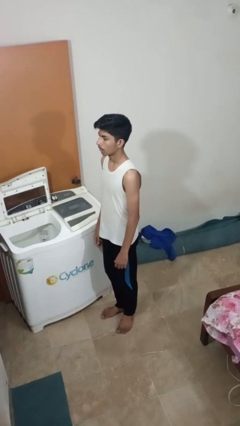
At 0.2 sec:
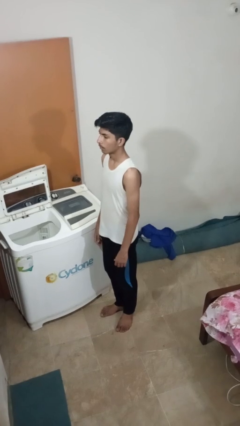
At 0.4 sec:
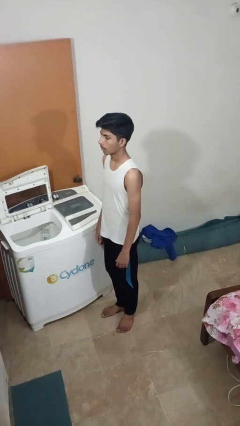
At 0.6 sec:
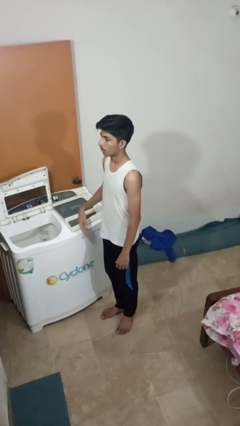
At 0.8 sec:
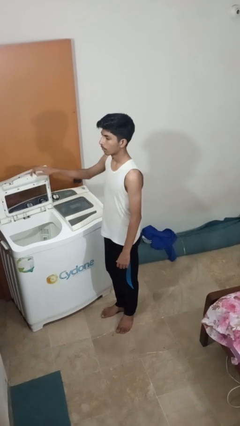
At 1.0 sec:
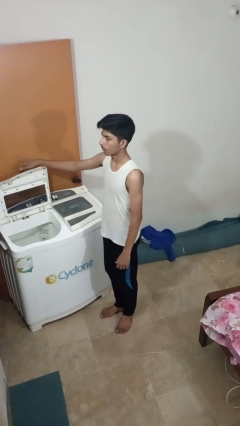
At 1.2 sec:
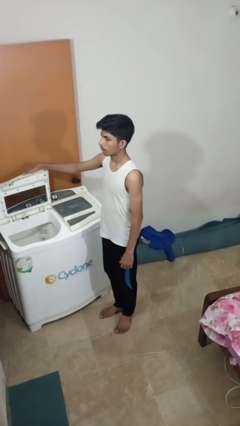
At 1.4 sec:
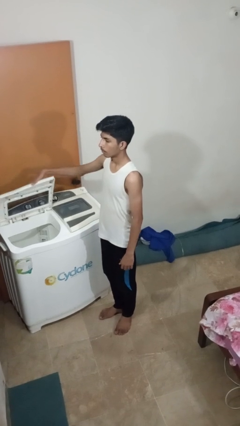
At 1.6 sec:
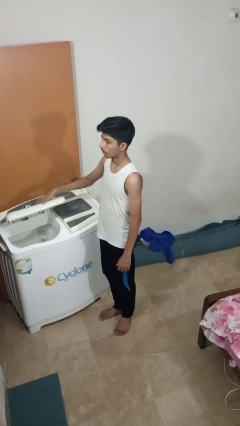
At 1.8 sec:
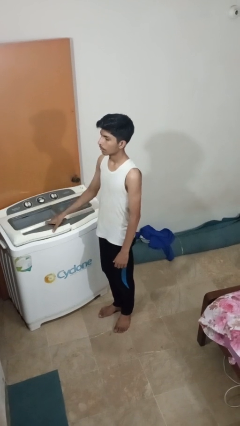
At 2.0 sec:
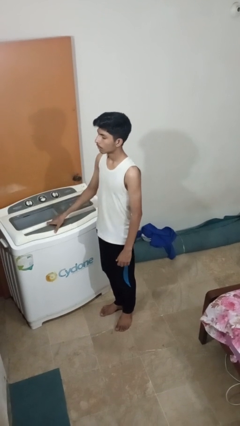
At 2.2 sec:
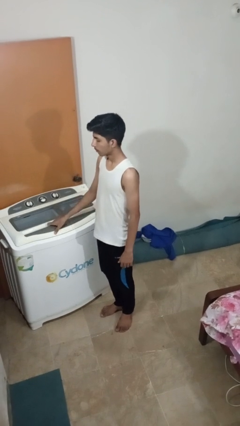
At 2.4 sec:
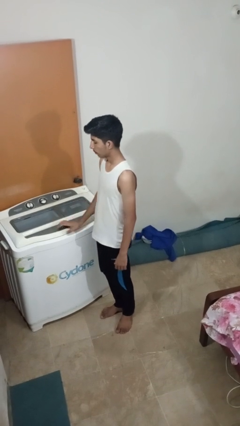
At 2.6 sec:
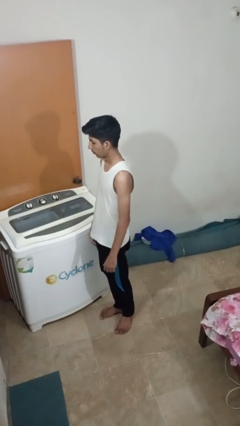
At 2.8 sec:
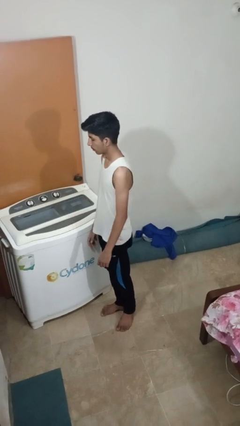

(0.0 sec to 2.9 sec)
person closes clothes washer

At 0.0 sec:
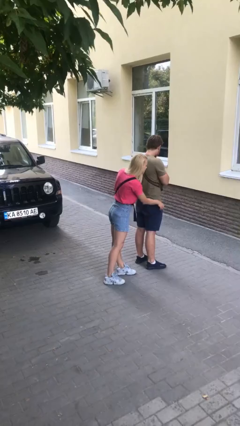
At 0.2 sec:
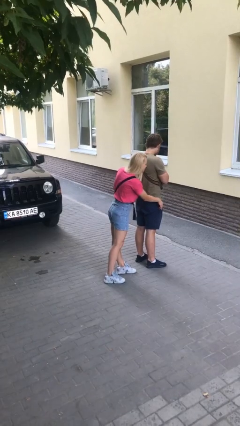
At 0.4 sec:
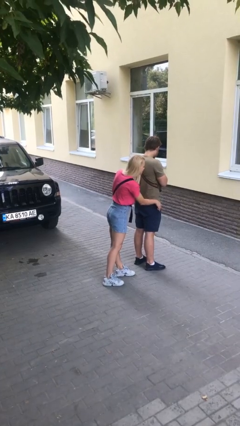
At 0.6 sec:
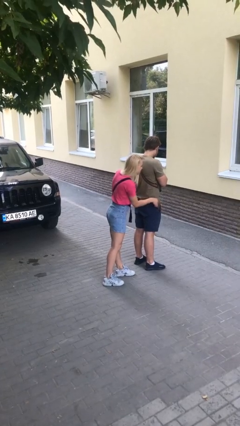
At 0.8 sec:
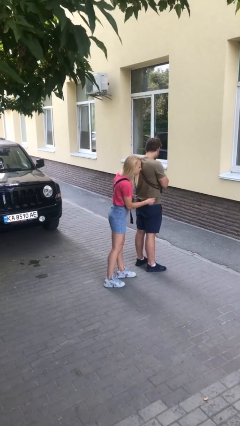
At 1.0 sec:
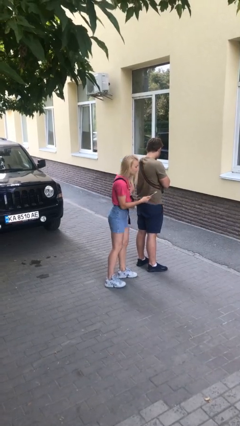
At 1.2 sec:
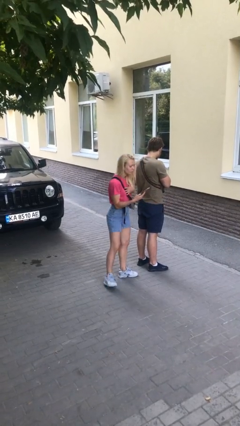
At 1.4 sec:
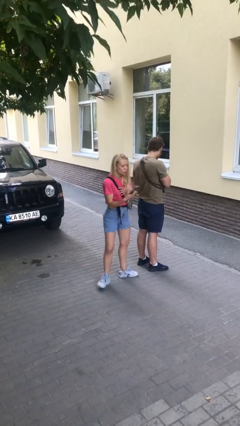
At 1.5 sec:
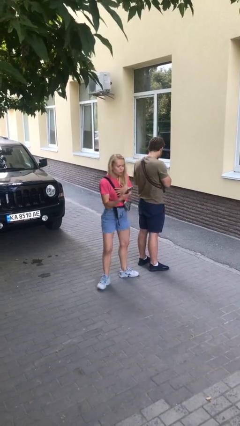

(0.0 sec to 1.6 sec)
person steals object from person

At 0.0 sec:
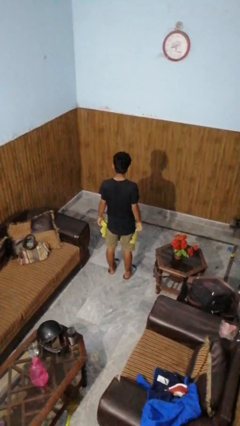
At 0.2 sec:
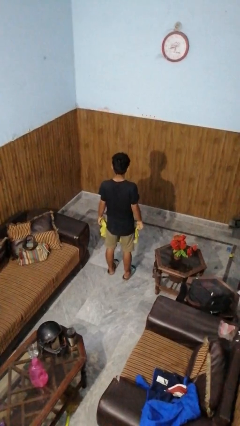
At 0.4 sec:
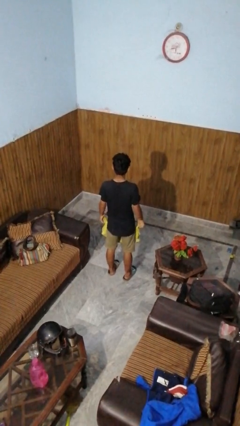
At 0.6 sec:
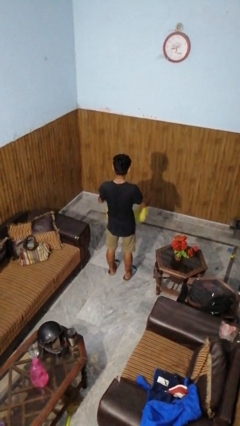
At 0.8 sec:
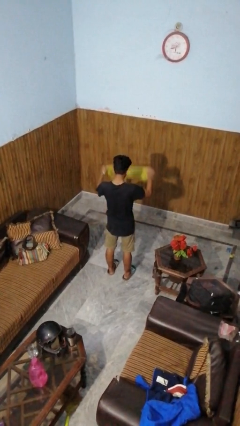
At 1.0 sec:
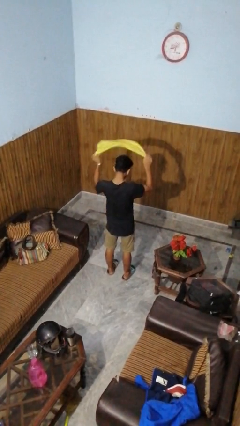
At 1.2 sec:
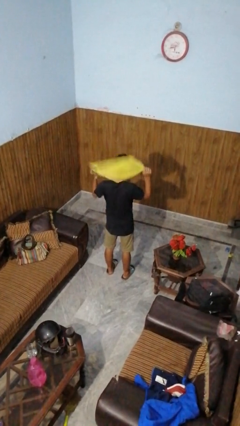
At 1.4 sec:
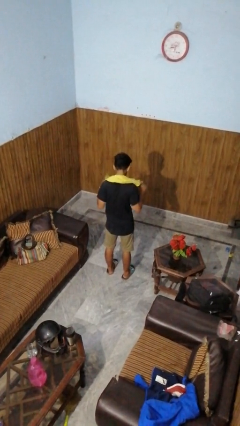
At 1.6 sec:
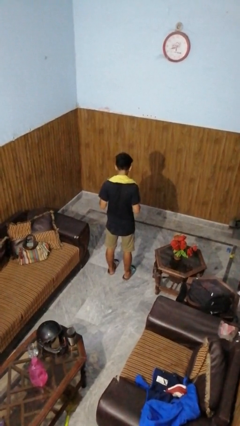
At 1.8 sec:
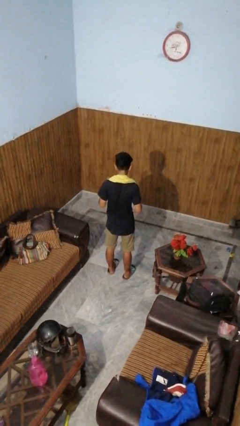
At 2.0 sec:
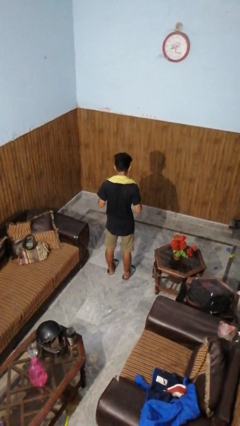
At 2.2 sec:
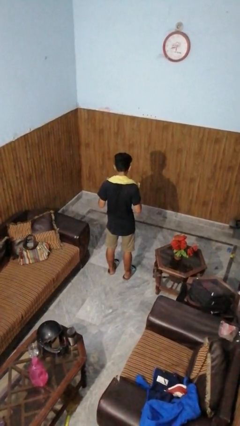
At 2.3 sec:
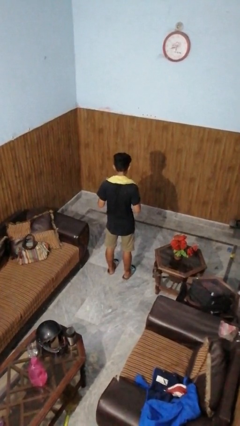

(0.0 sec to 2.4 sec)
person puts on scarf

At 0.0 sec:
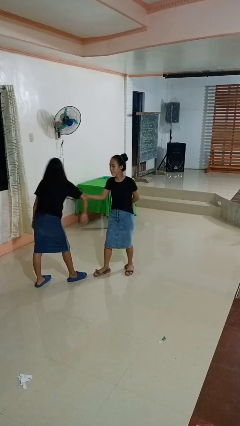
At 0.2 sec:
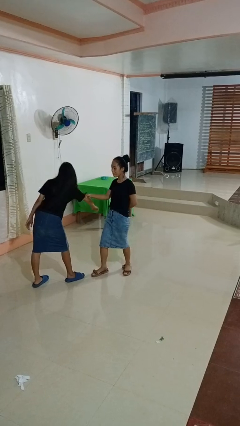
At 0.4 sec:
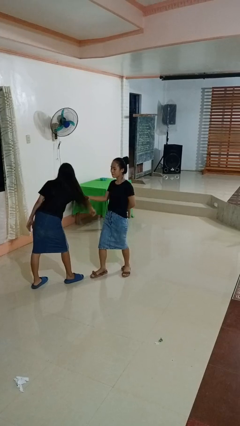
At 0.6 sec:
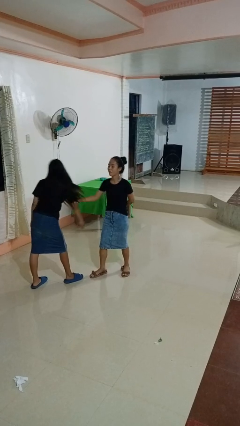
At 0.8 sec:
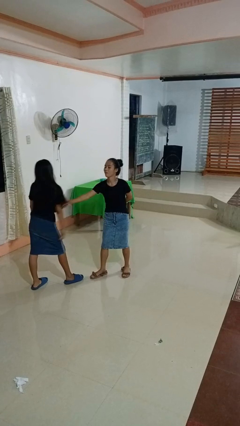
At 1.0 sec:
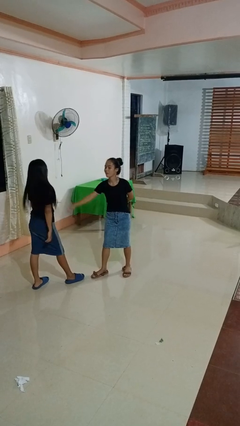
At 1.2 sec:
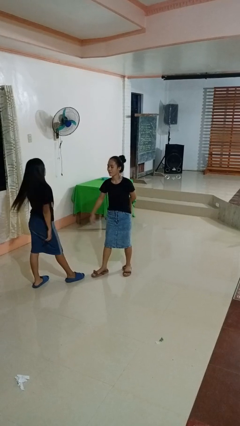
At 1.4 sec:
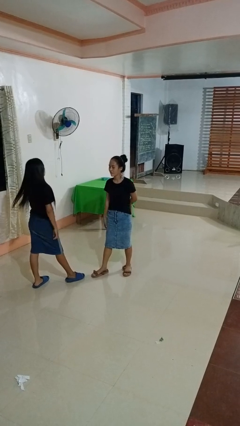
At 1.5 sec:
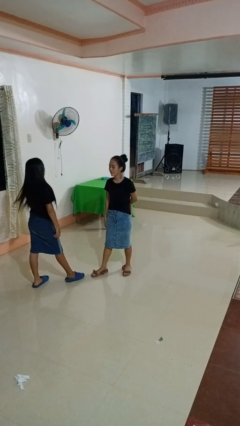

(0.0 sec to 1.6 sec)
person grabs person by bicep

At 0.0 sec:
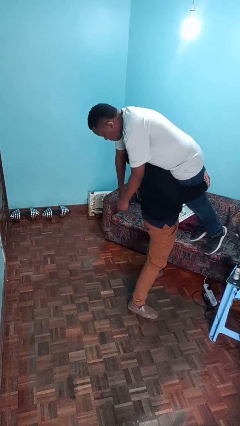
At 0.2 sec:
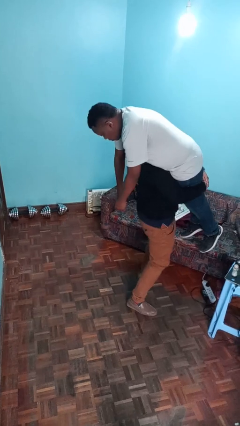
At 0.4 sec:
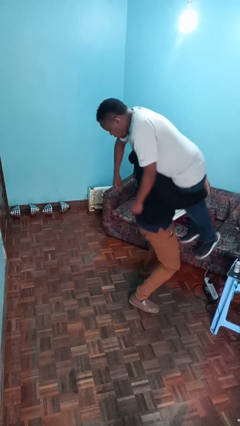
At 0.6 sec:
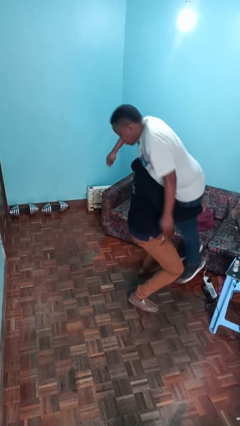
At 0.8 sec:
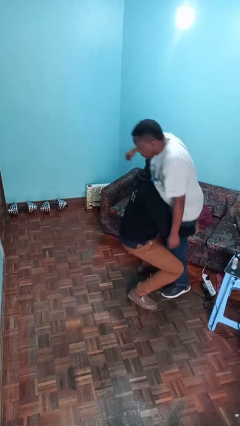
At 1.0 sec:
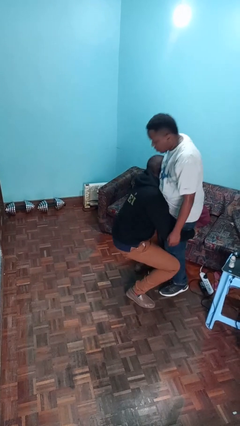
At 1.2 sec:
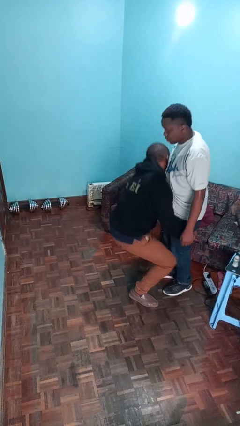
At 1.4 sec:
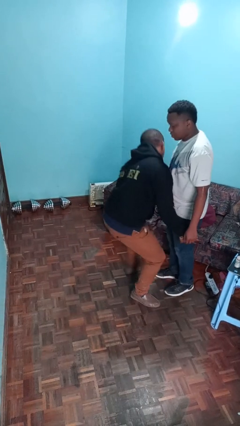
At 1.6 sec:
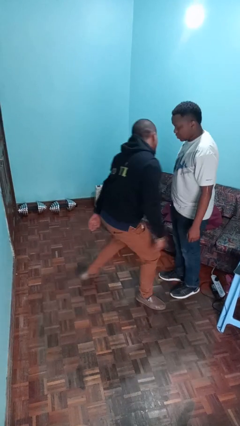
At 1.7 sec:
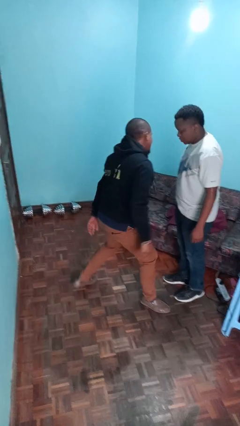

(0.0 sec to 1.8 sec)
person puts down person

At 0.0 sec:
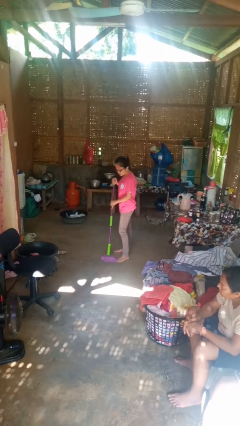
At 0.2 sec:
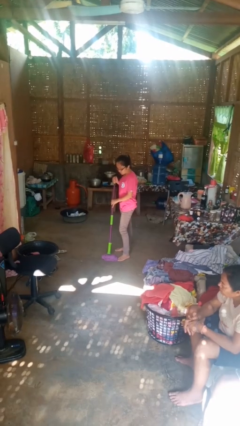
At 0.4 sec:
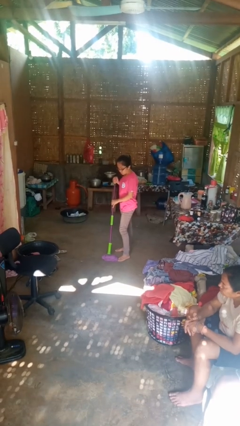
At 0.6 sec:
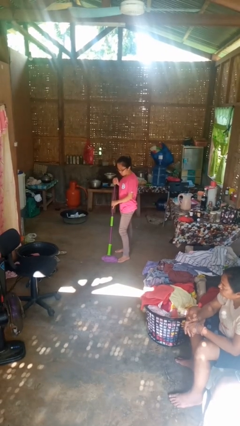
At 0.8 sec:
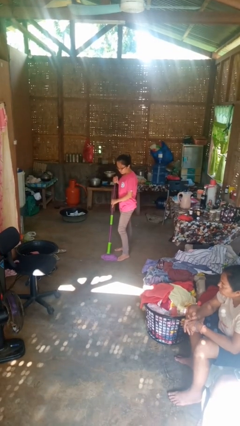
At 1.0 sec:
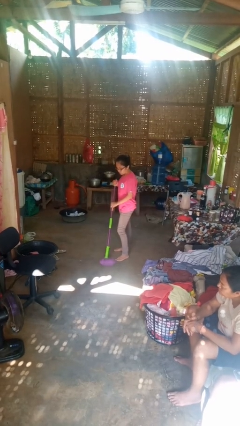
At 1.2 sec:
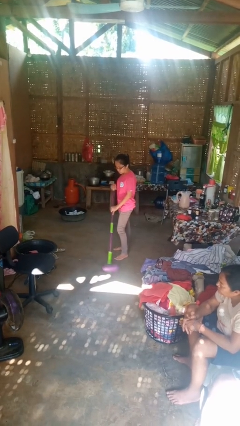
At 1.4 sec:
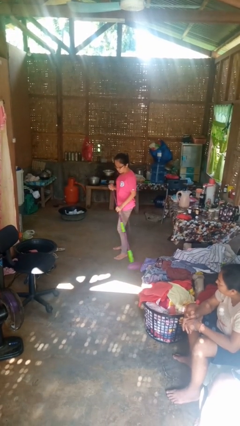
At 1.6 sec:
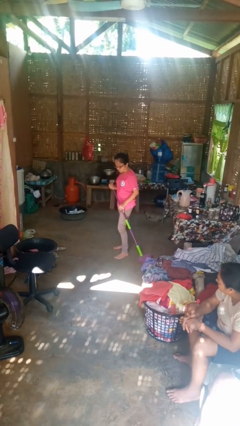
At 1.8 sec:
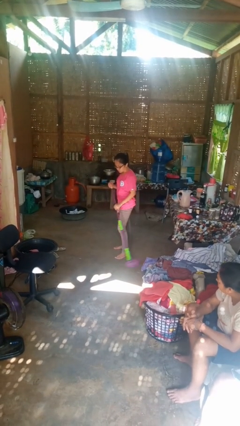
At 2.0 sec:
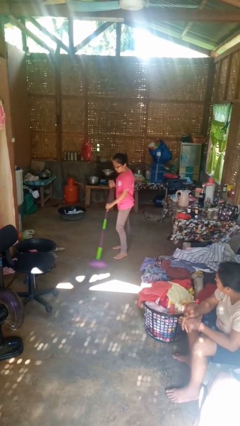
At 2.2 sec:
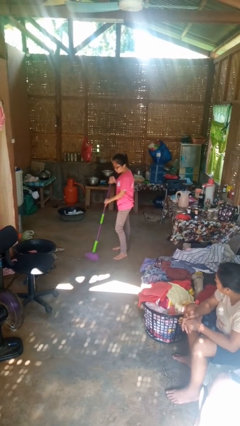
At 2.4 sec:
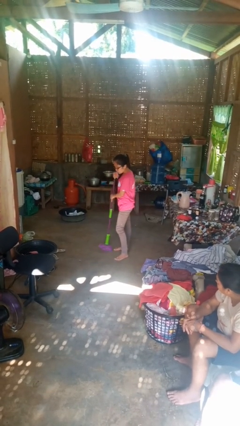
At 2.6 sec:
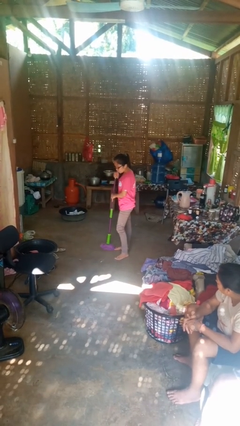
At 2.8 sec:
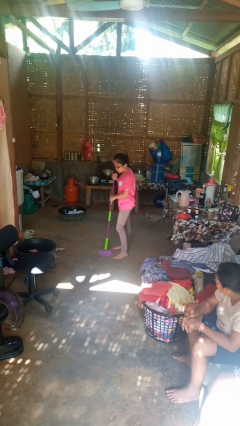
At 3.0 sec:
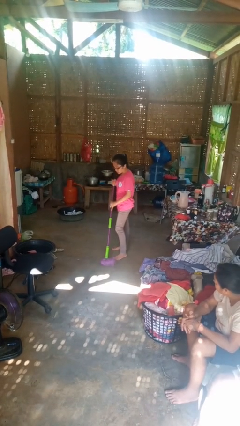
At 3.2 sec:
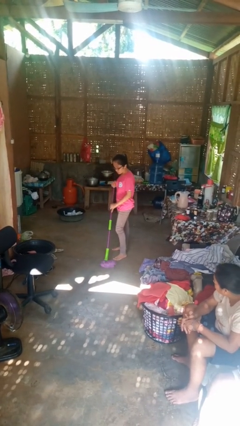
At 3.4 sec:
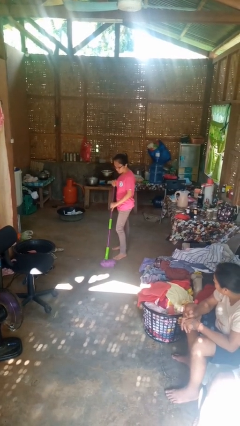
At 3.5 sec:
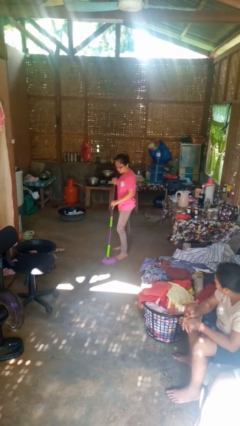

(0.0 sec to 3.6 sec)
person mops

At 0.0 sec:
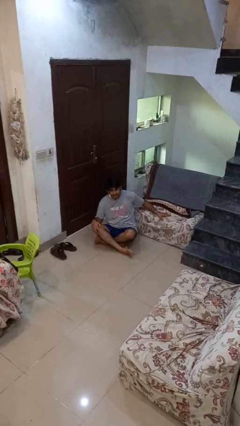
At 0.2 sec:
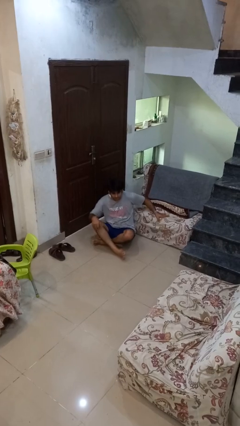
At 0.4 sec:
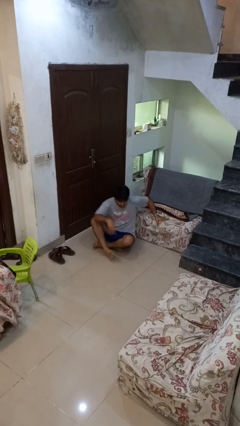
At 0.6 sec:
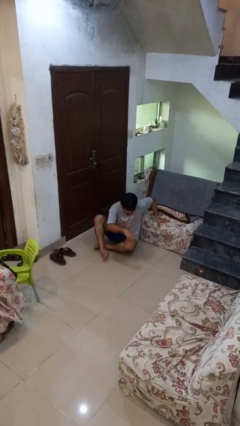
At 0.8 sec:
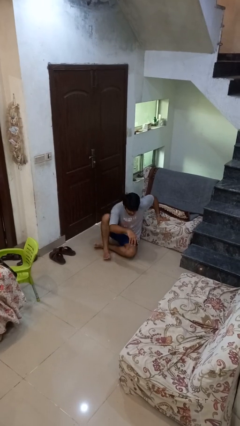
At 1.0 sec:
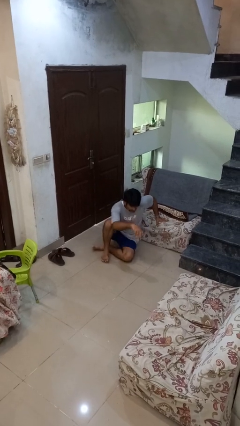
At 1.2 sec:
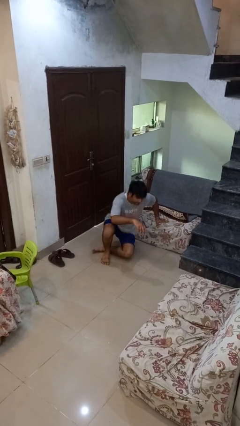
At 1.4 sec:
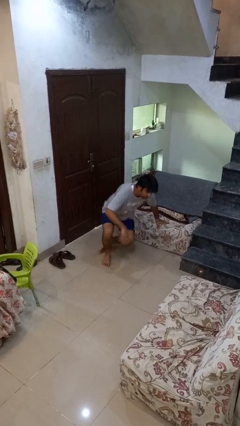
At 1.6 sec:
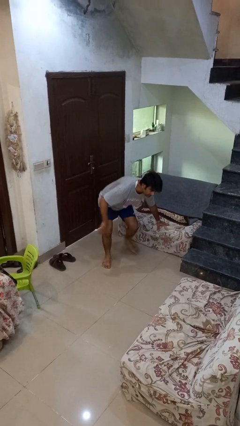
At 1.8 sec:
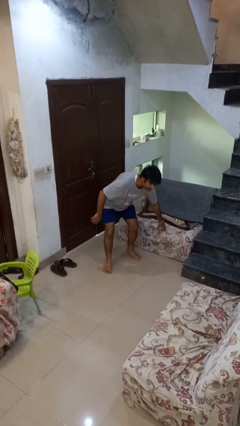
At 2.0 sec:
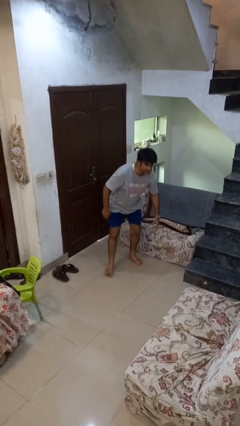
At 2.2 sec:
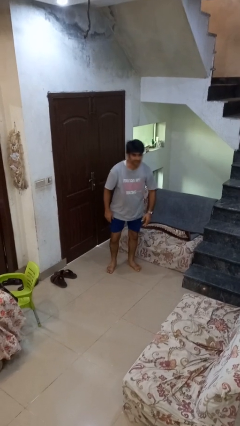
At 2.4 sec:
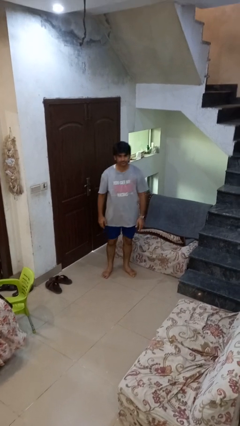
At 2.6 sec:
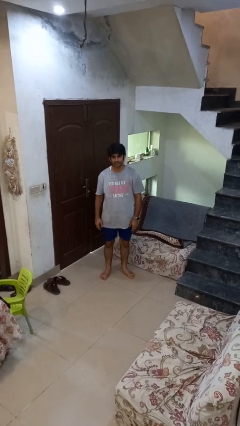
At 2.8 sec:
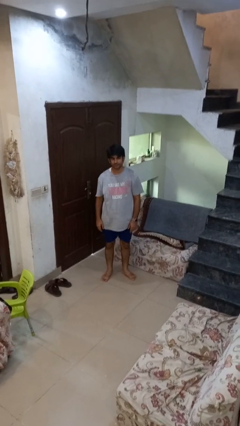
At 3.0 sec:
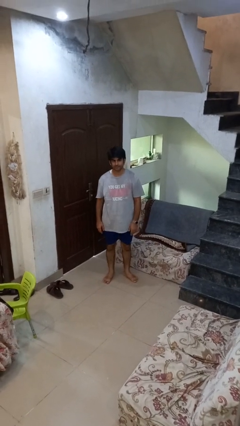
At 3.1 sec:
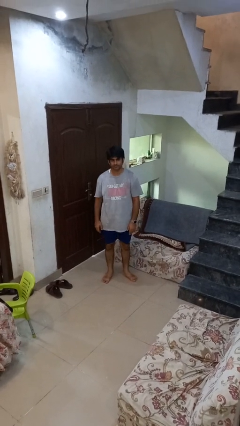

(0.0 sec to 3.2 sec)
person stands up from floor
